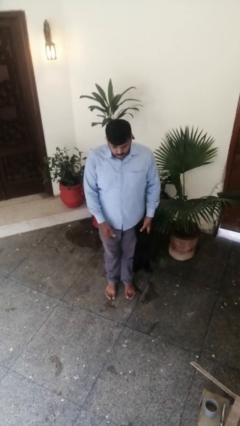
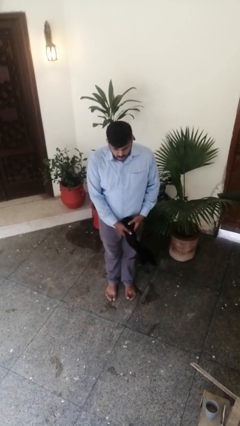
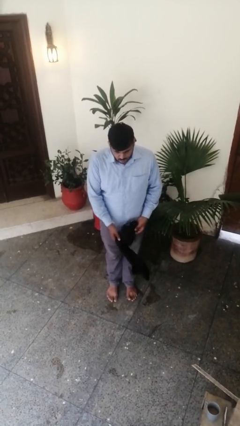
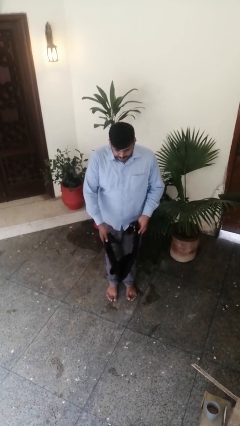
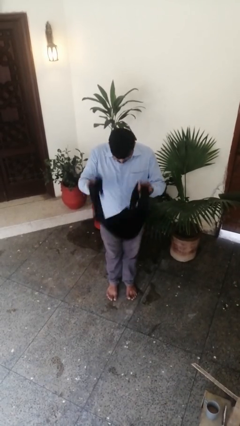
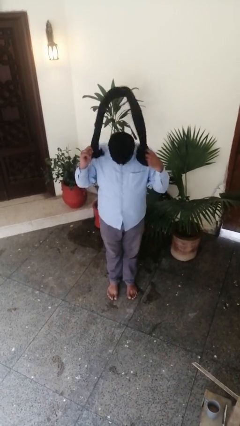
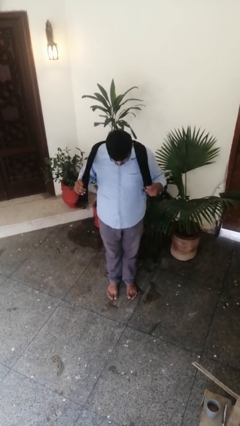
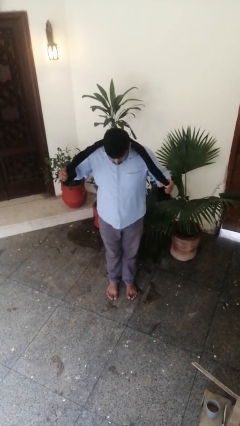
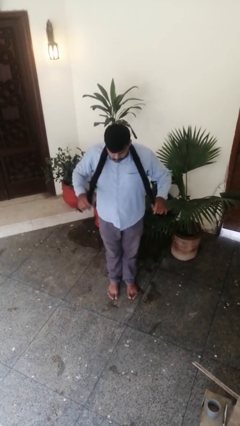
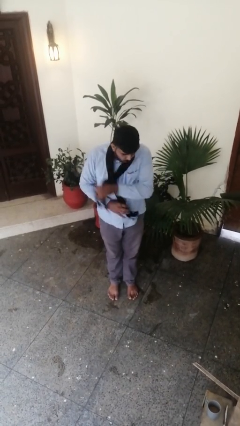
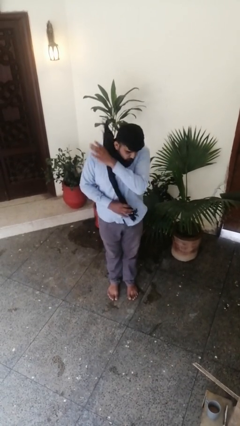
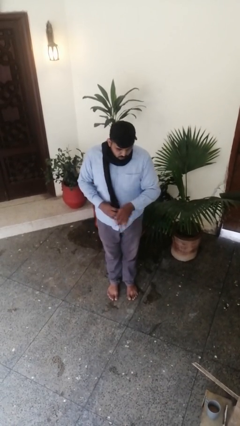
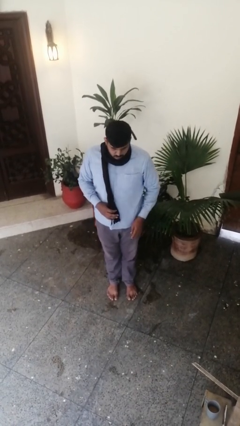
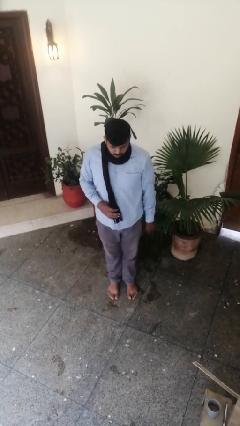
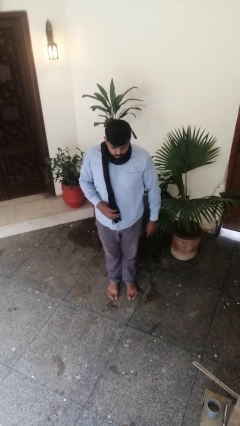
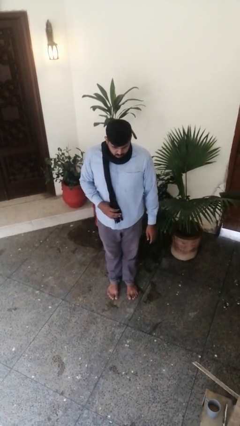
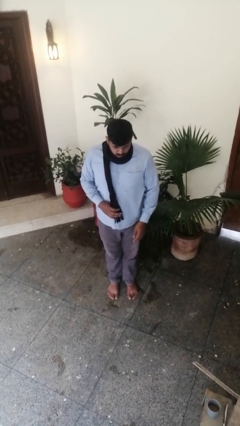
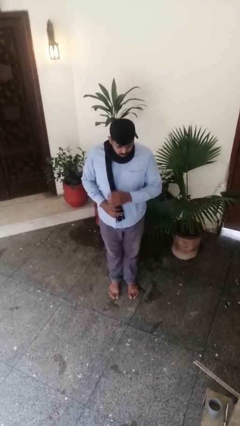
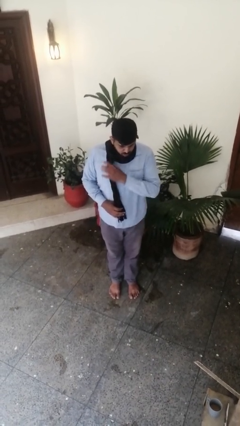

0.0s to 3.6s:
person puts on scarf

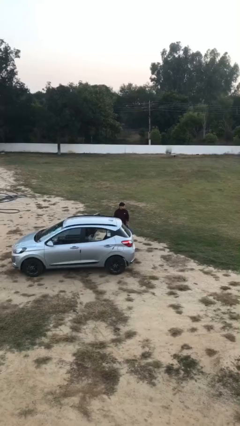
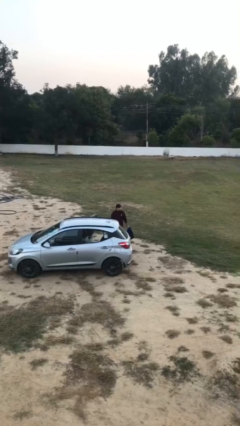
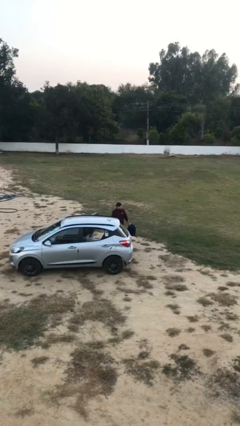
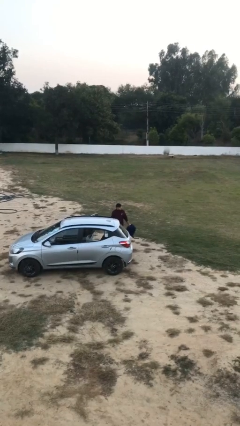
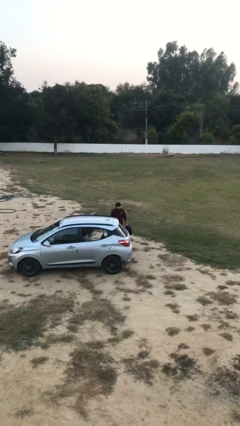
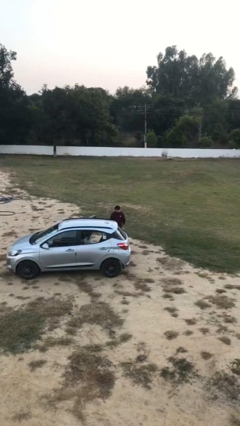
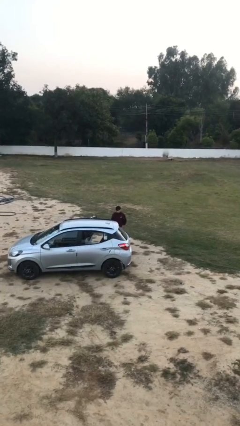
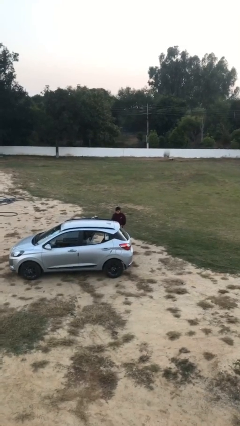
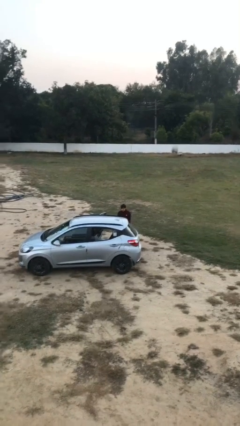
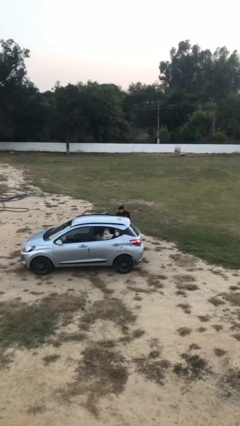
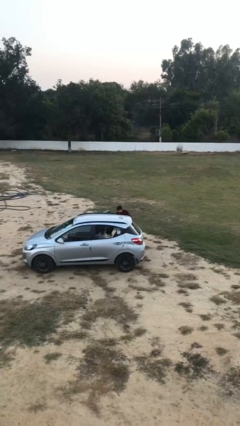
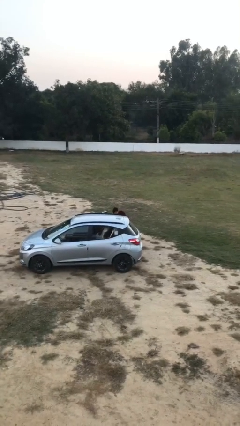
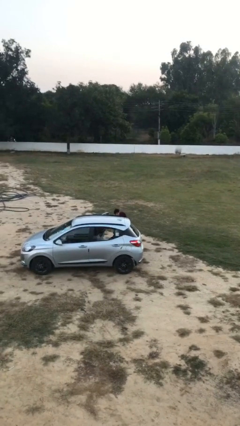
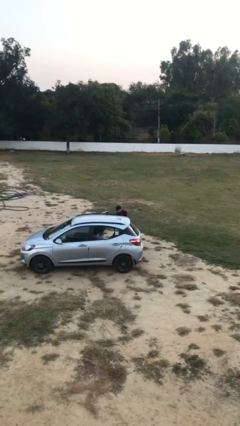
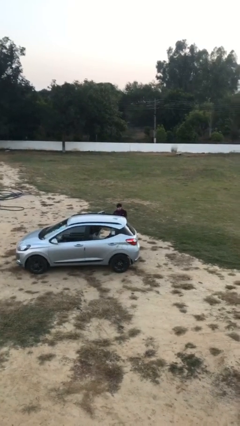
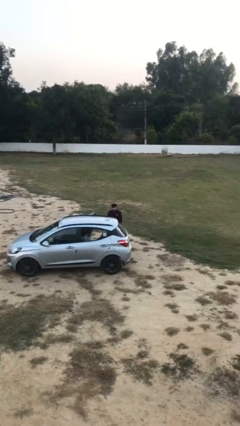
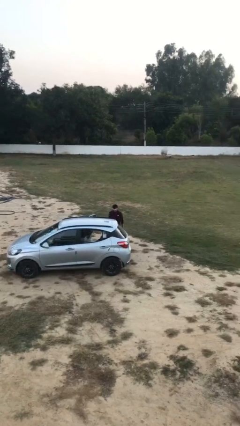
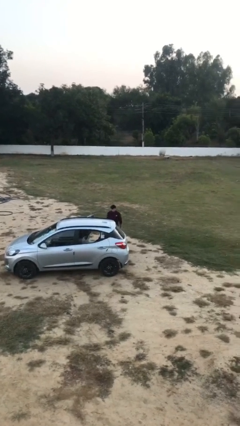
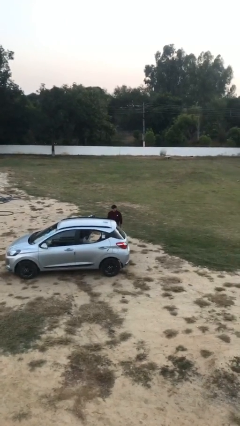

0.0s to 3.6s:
person loads car

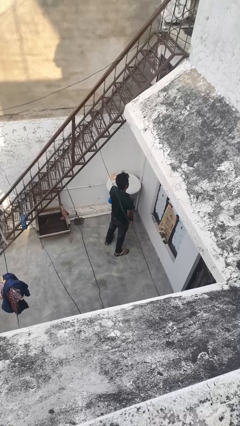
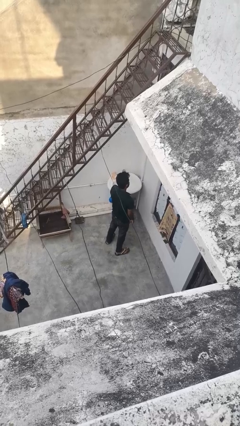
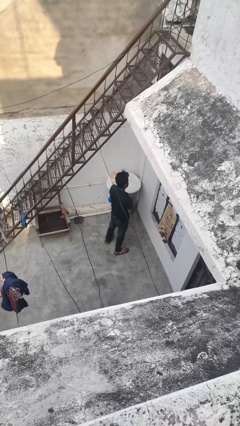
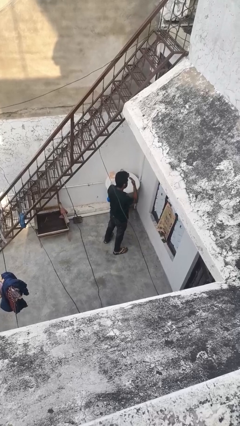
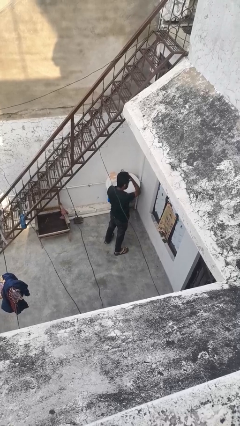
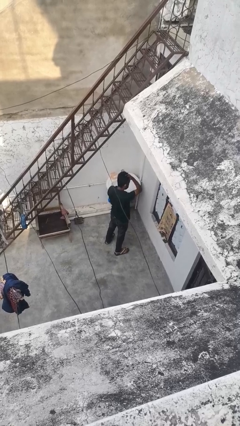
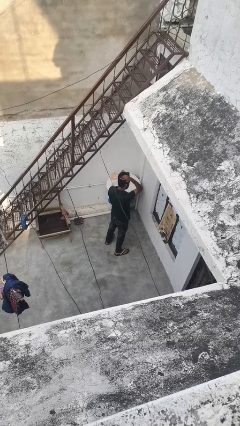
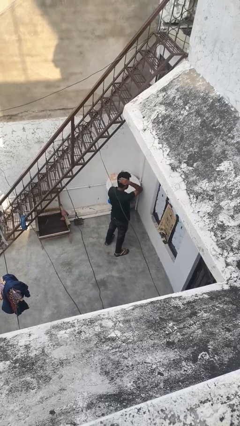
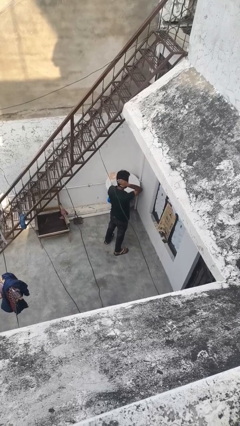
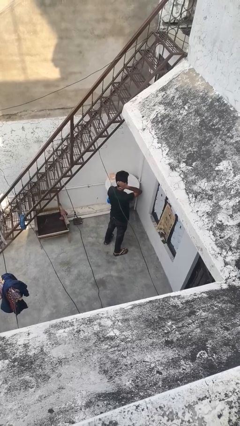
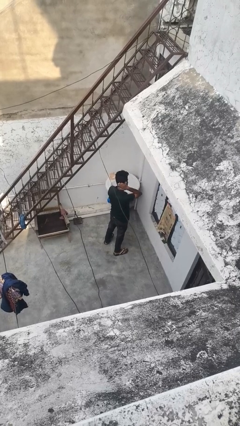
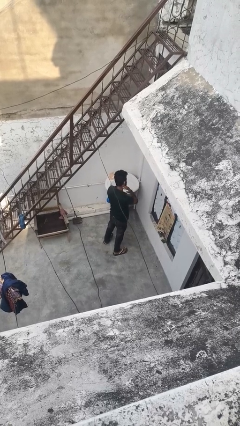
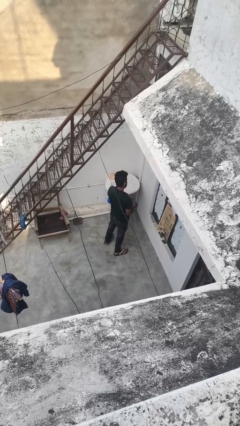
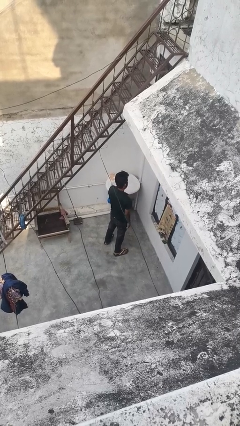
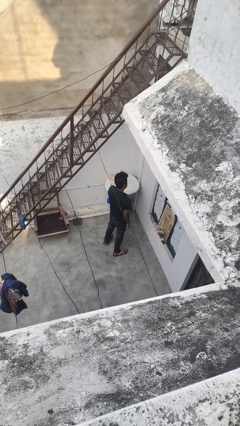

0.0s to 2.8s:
person strokes hair

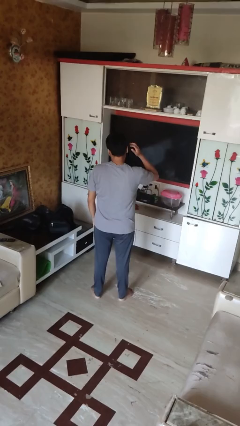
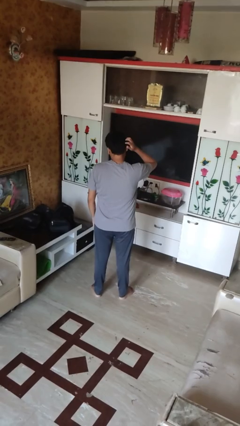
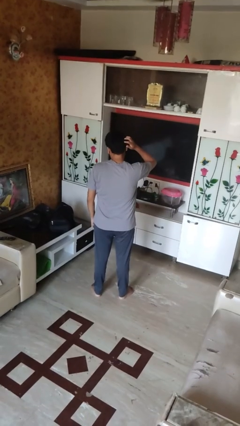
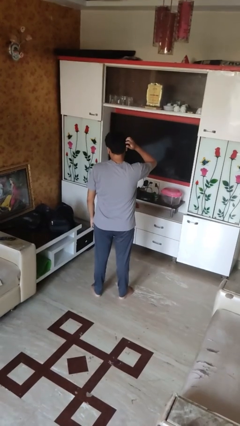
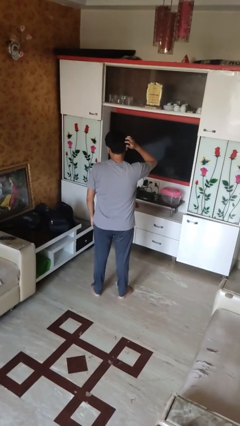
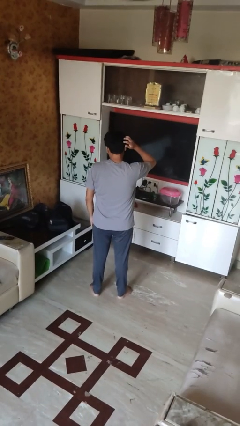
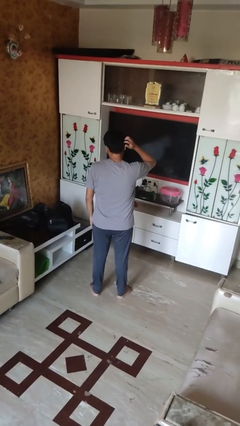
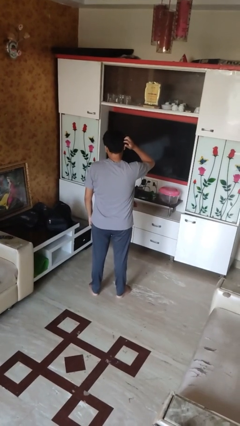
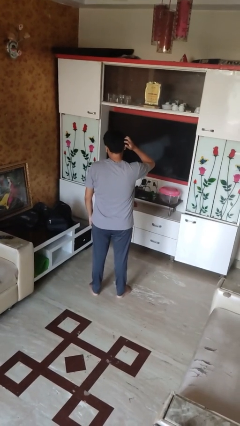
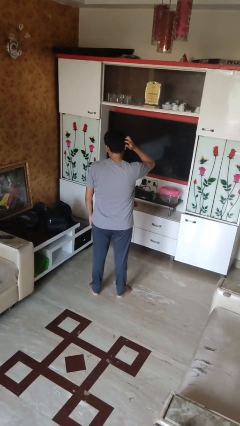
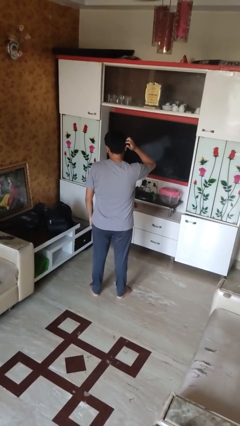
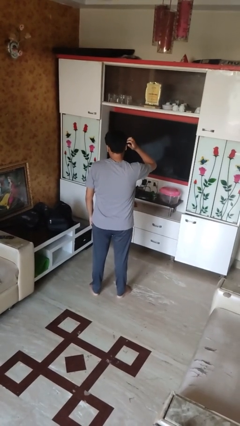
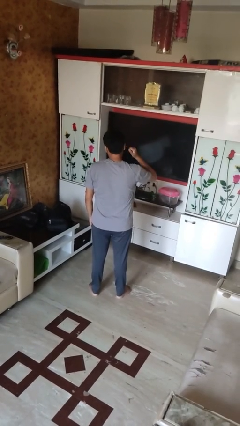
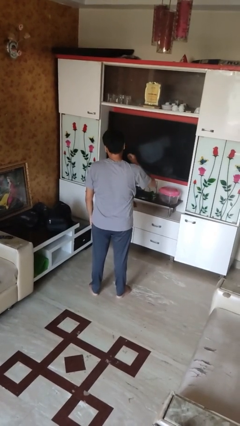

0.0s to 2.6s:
person scratches face

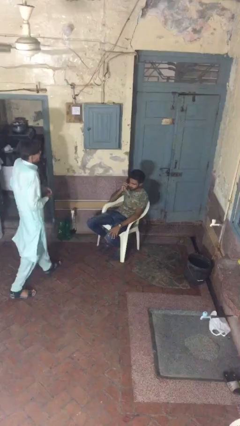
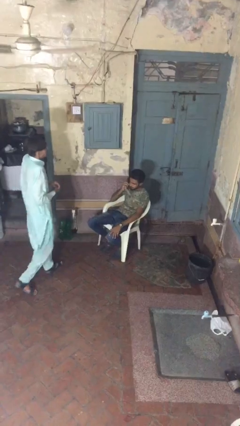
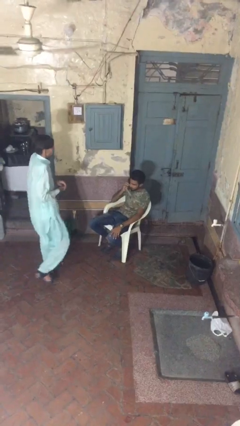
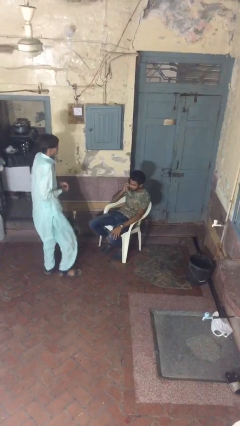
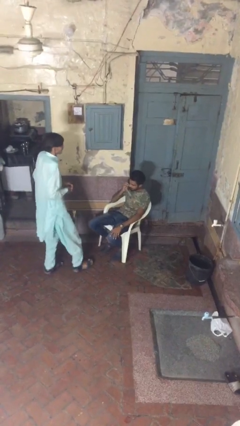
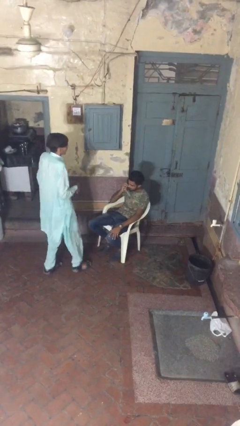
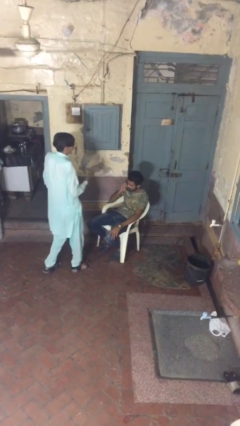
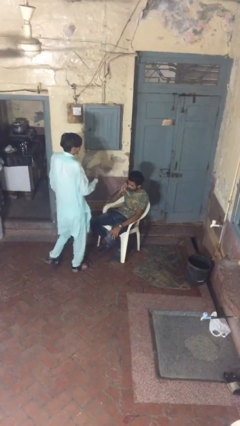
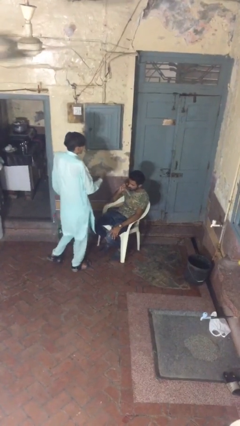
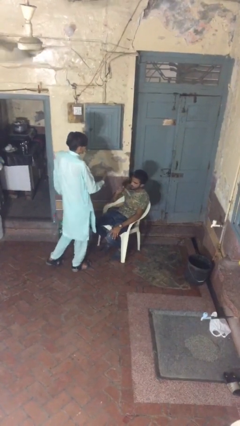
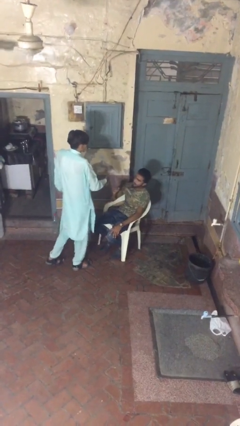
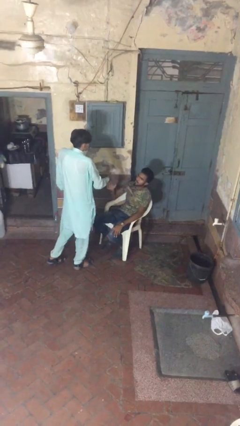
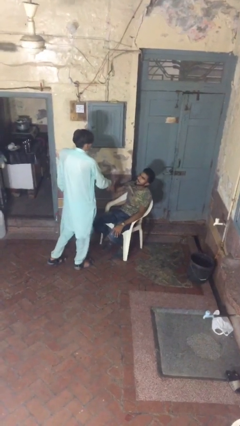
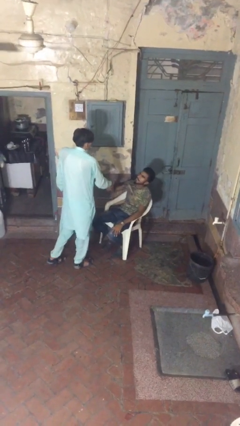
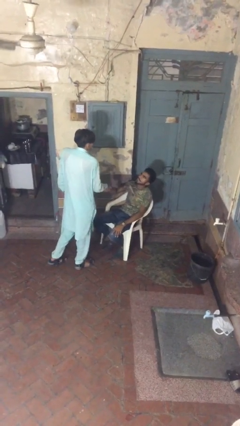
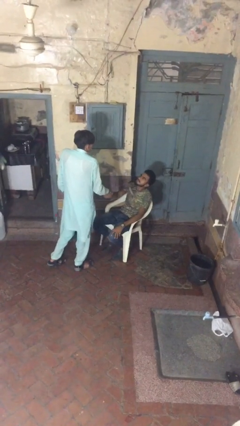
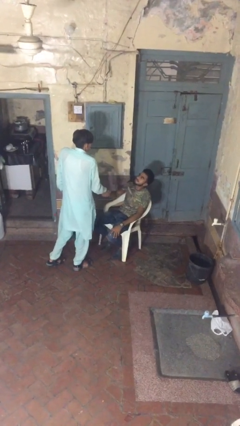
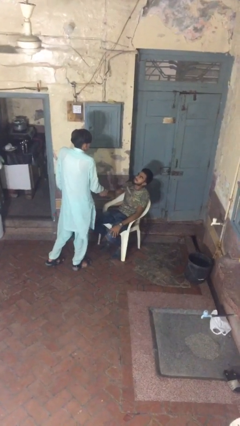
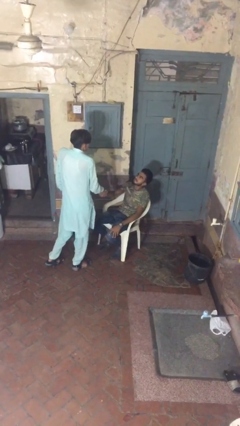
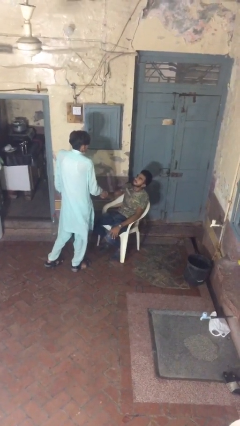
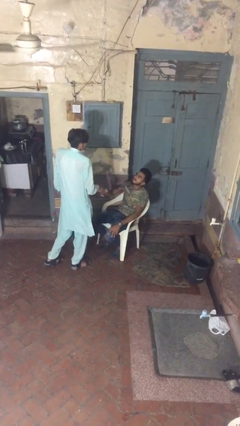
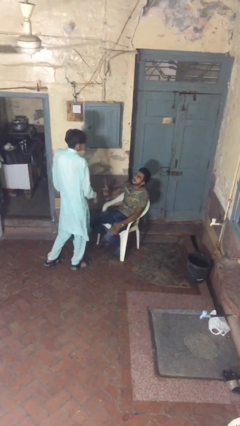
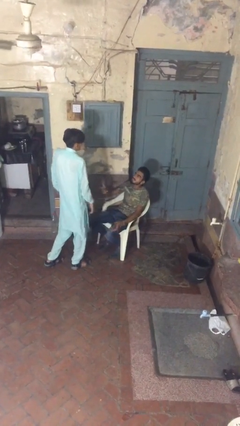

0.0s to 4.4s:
person shakes hand

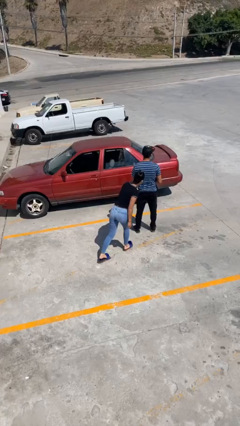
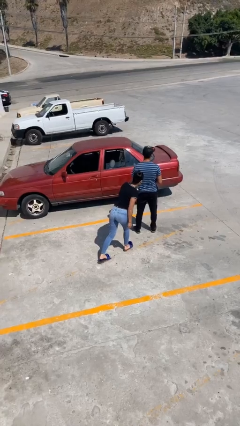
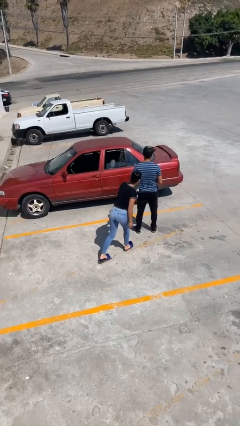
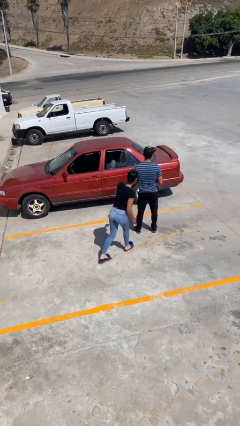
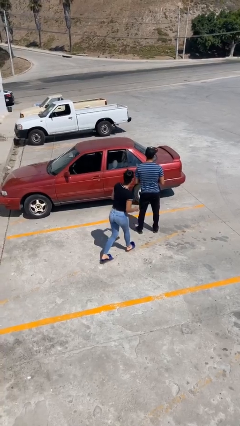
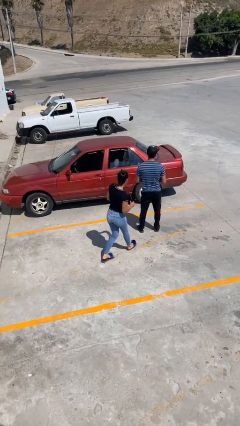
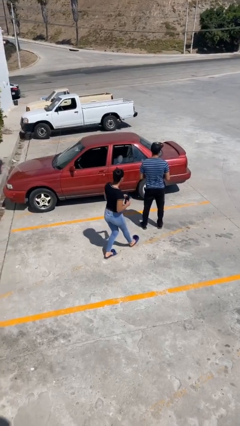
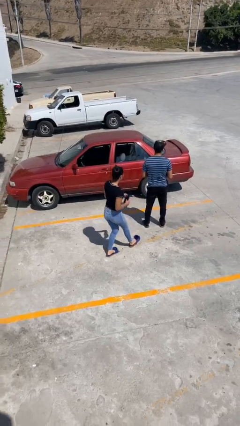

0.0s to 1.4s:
person steals object from person
